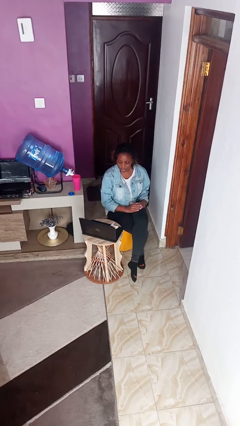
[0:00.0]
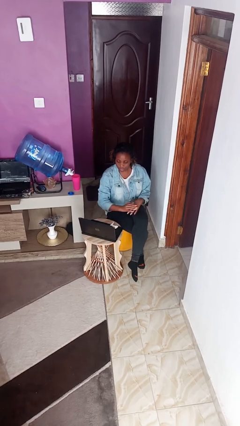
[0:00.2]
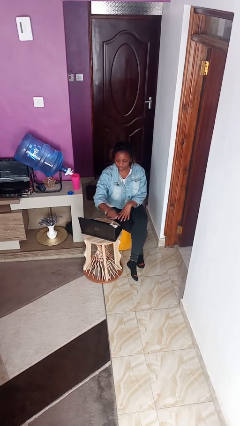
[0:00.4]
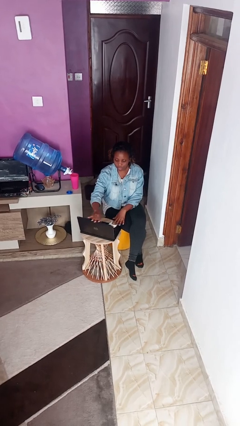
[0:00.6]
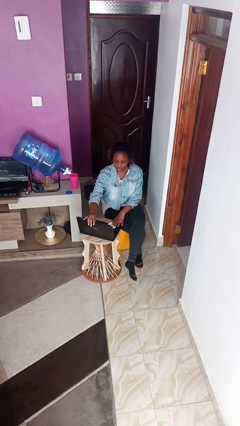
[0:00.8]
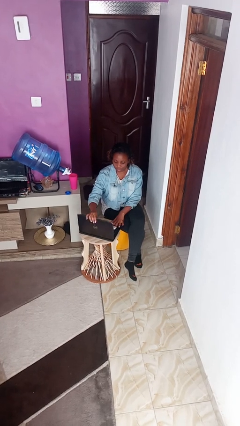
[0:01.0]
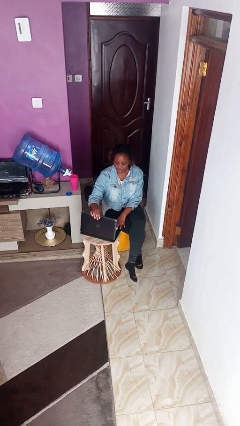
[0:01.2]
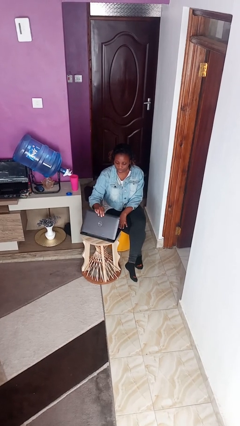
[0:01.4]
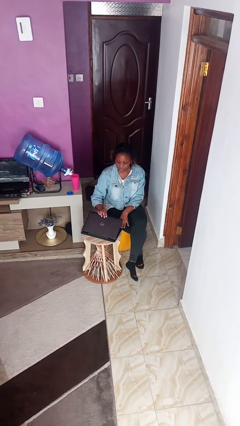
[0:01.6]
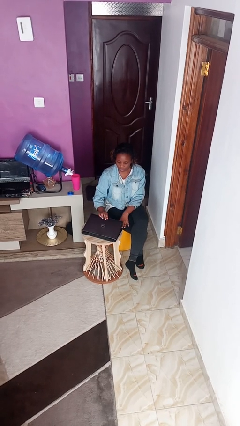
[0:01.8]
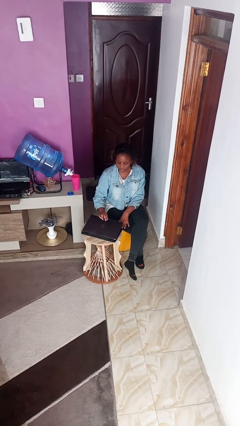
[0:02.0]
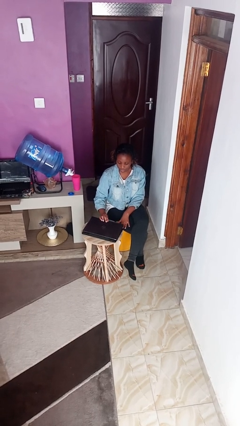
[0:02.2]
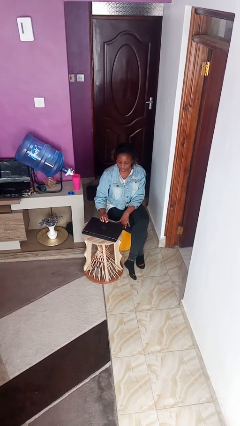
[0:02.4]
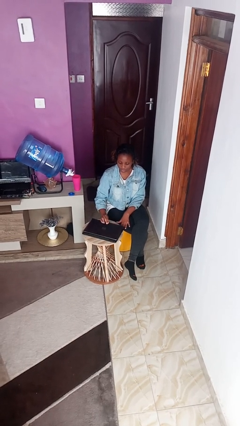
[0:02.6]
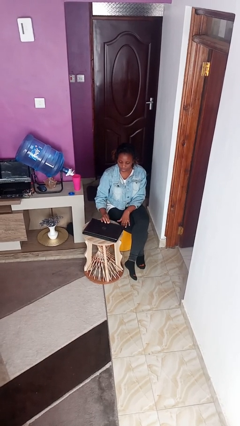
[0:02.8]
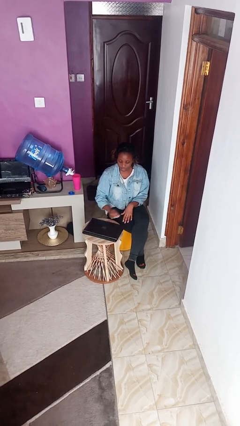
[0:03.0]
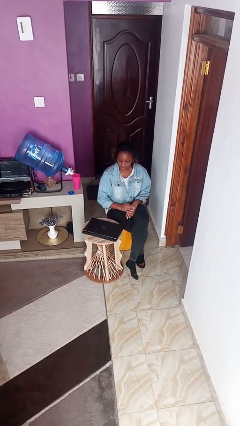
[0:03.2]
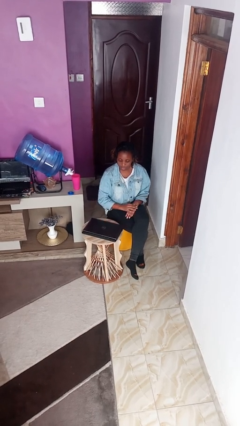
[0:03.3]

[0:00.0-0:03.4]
person closes laptop

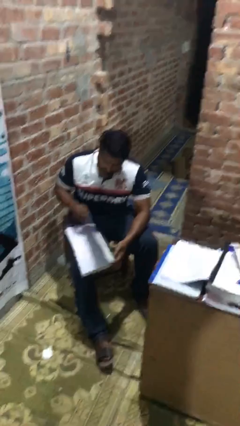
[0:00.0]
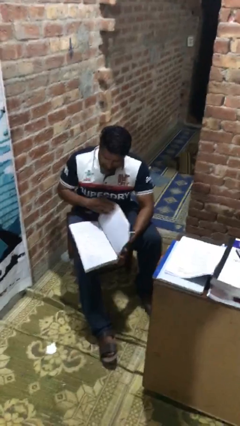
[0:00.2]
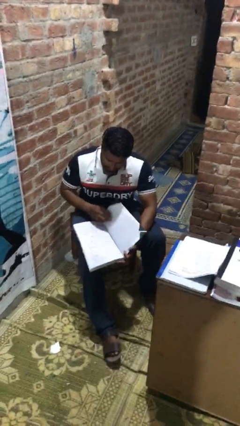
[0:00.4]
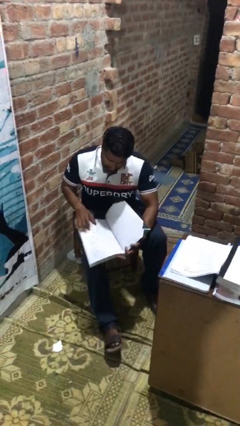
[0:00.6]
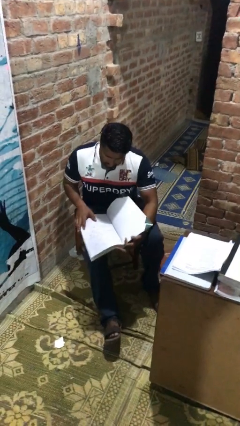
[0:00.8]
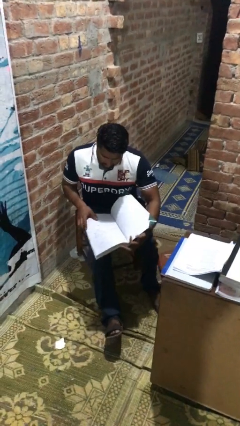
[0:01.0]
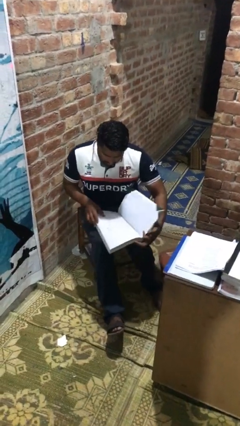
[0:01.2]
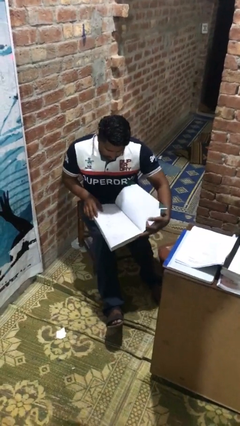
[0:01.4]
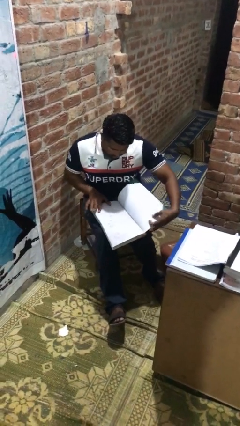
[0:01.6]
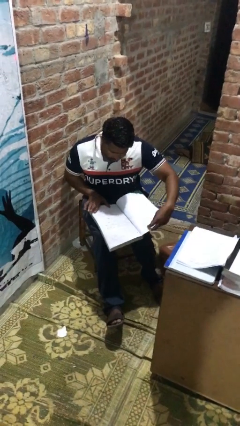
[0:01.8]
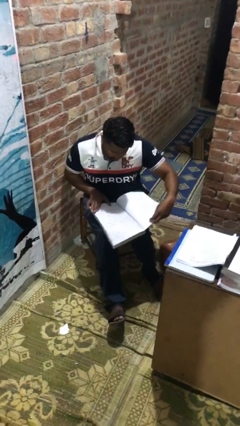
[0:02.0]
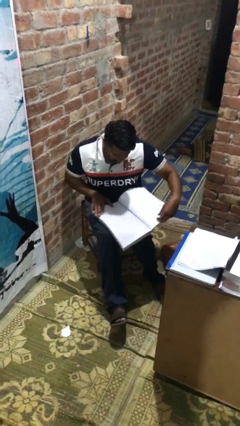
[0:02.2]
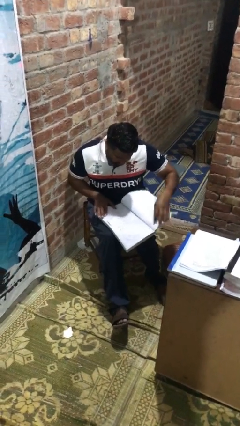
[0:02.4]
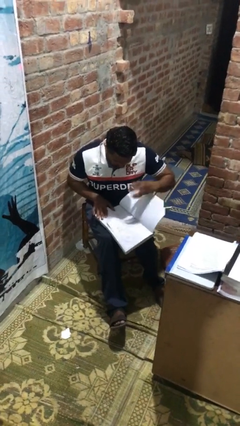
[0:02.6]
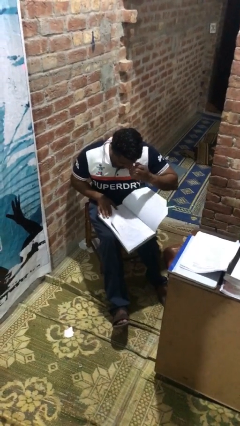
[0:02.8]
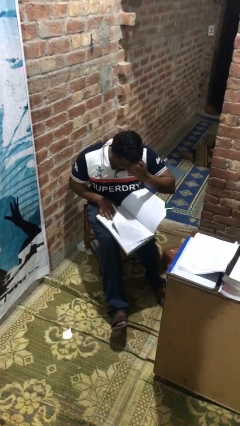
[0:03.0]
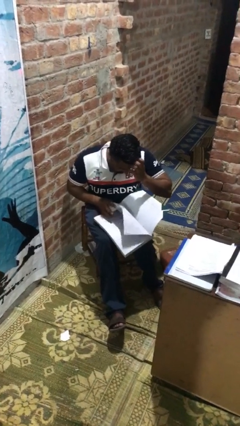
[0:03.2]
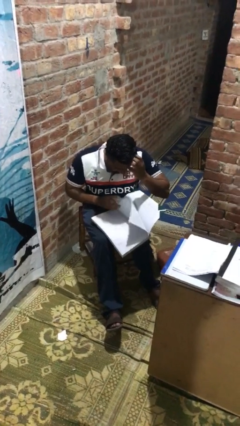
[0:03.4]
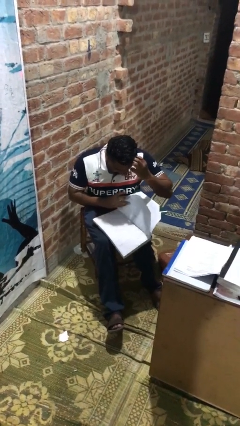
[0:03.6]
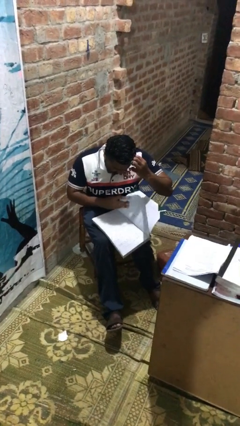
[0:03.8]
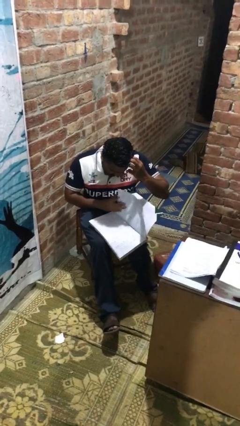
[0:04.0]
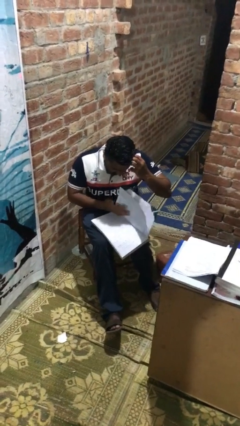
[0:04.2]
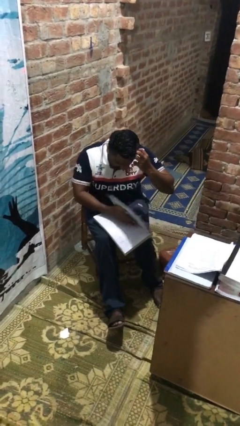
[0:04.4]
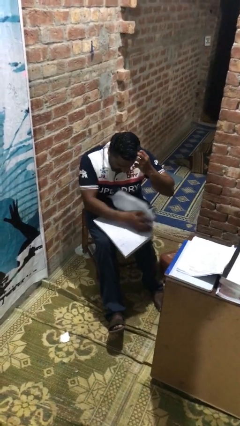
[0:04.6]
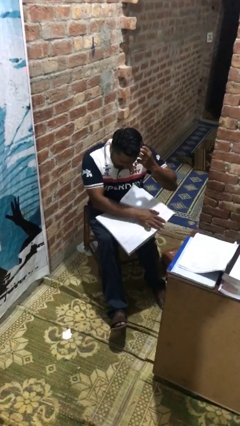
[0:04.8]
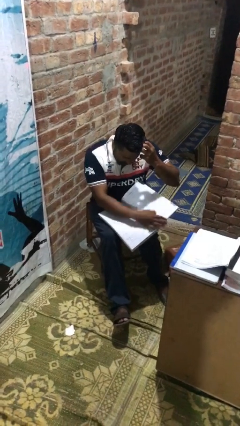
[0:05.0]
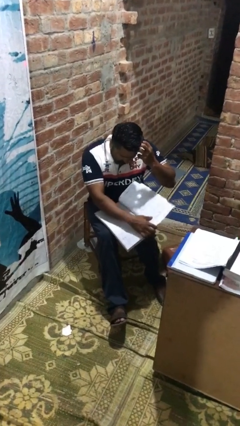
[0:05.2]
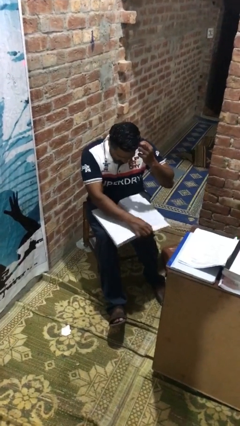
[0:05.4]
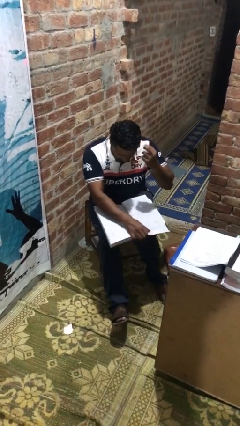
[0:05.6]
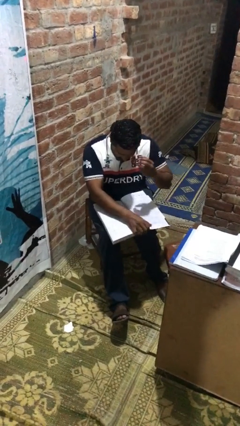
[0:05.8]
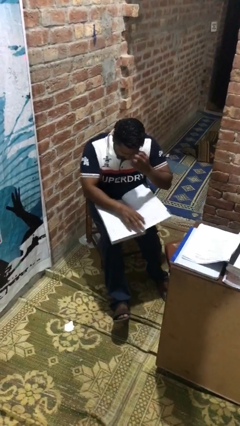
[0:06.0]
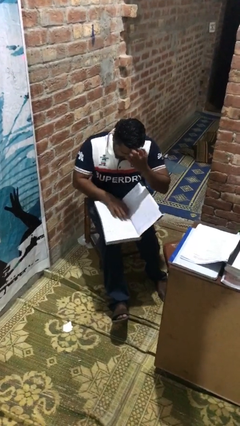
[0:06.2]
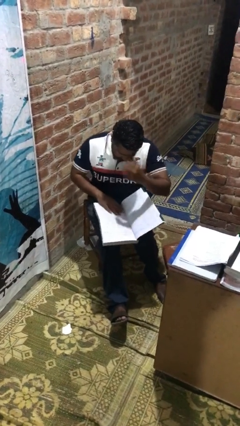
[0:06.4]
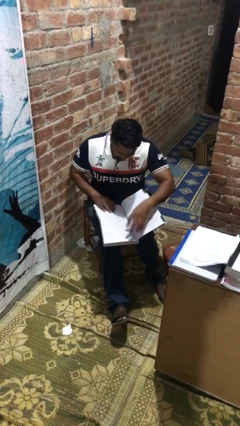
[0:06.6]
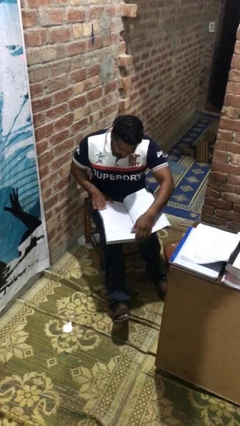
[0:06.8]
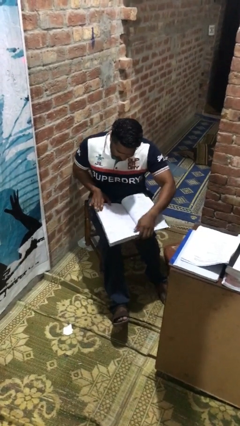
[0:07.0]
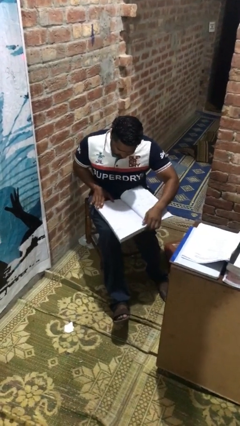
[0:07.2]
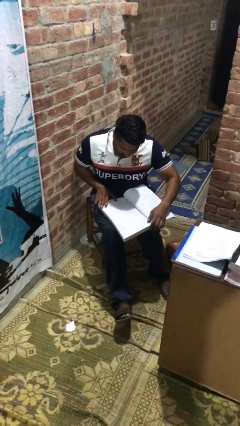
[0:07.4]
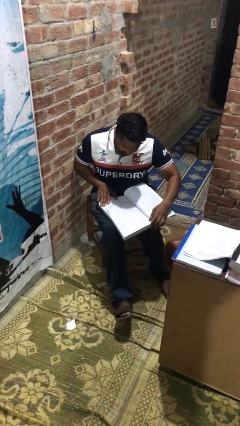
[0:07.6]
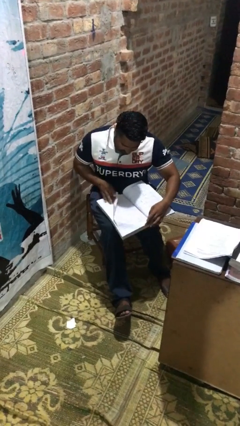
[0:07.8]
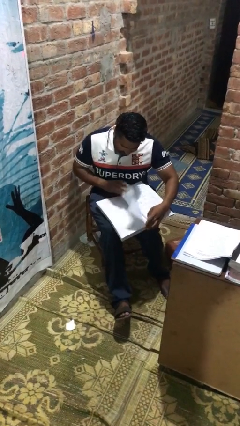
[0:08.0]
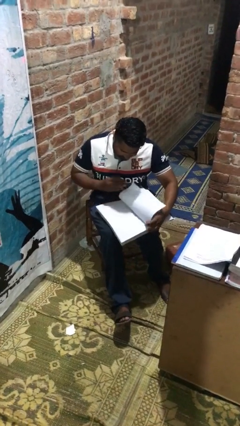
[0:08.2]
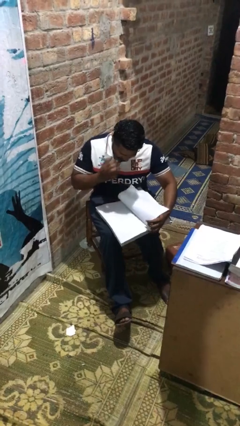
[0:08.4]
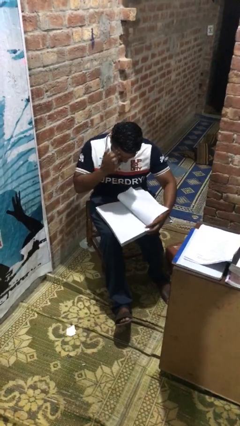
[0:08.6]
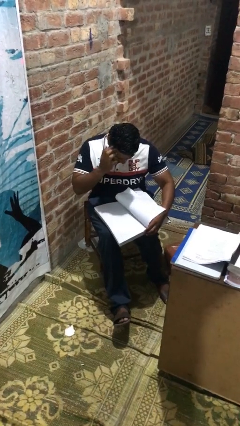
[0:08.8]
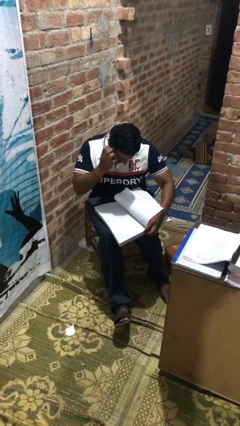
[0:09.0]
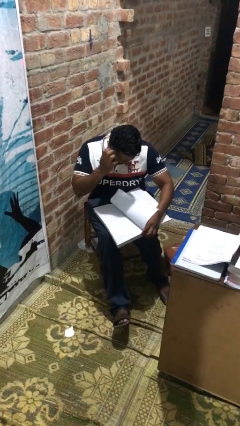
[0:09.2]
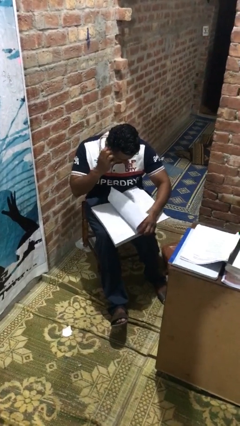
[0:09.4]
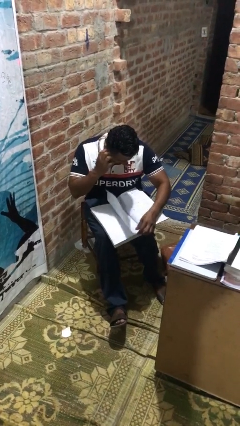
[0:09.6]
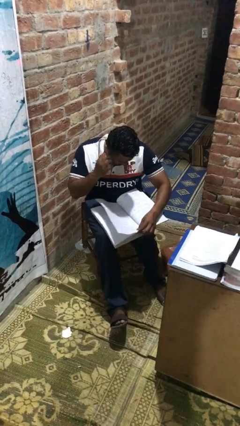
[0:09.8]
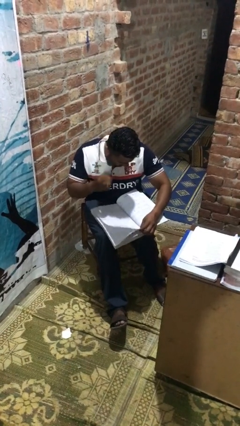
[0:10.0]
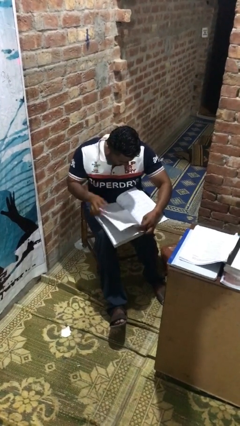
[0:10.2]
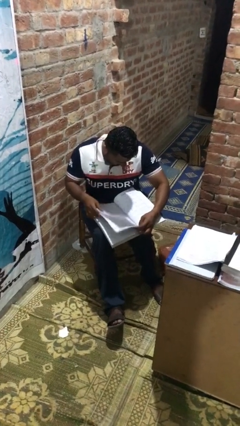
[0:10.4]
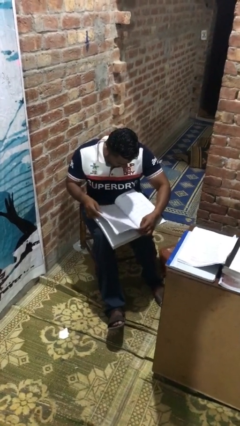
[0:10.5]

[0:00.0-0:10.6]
person reads document

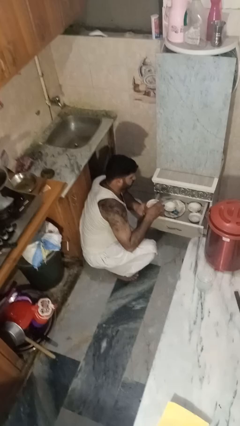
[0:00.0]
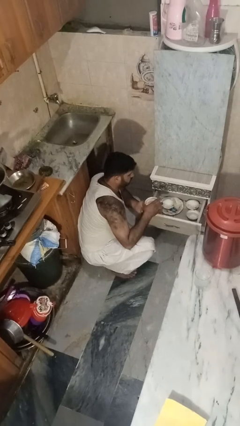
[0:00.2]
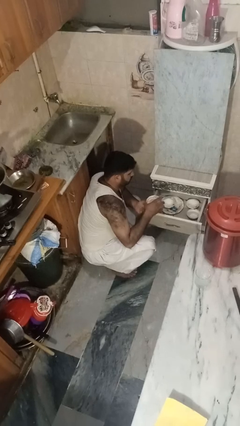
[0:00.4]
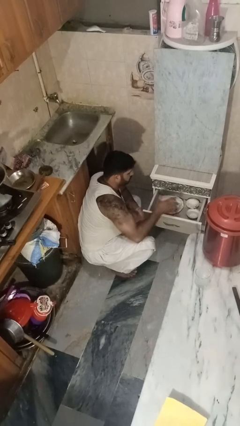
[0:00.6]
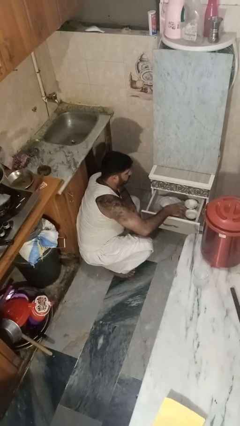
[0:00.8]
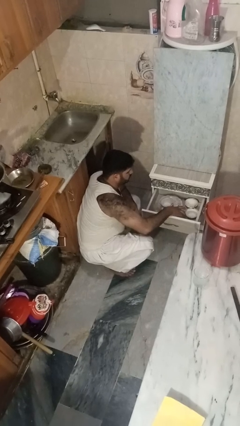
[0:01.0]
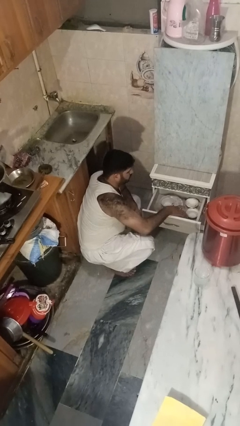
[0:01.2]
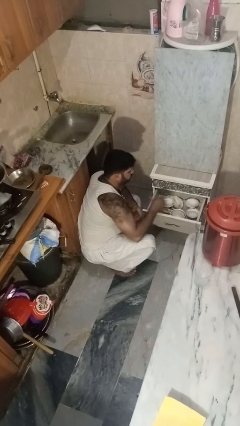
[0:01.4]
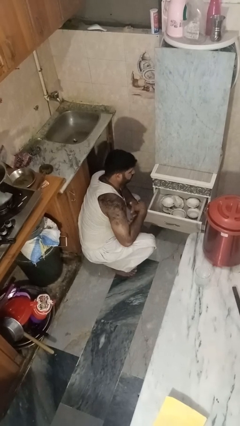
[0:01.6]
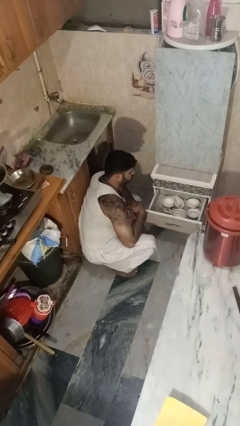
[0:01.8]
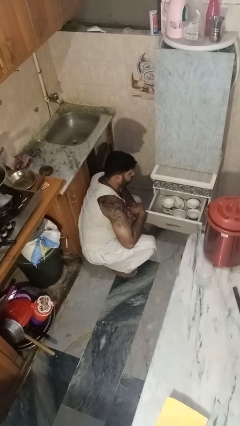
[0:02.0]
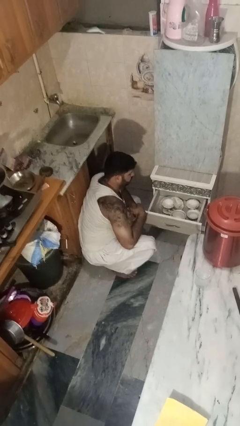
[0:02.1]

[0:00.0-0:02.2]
person puts object into kitchen drawer

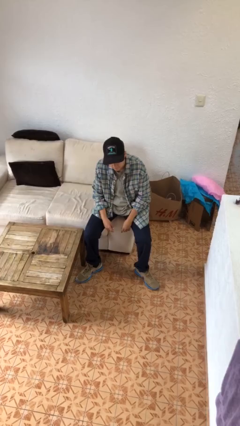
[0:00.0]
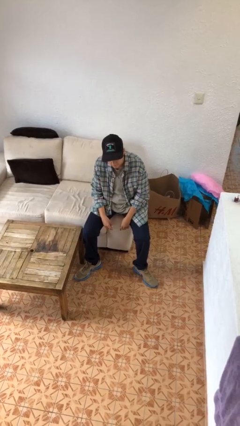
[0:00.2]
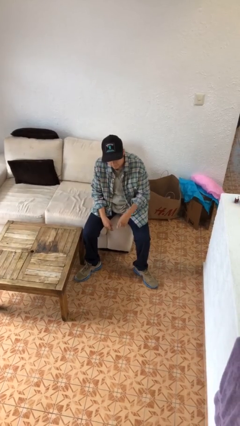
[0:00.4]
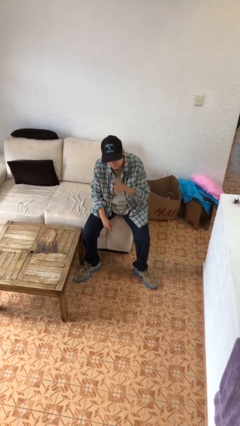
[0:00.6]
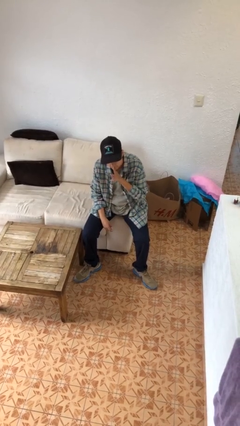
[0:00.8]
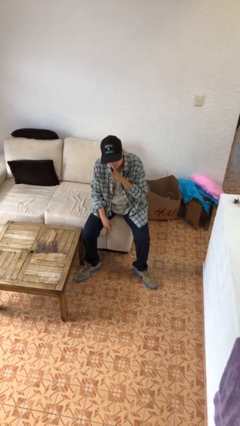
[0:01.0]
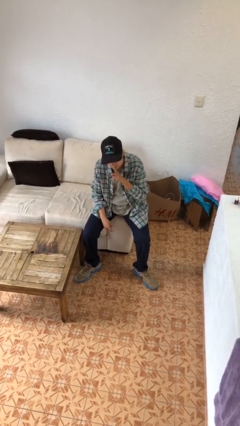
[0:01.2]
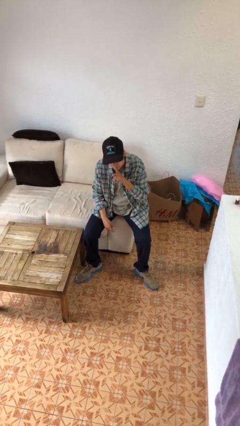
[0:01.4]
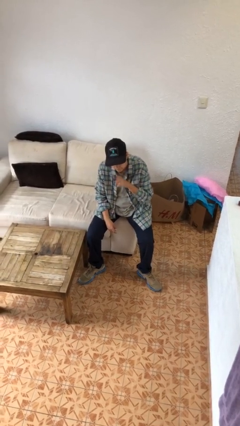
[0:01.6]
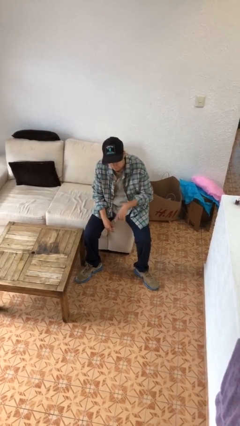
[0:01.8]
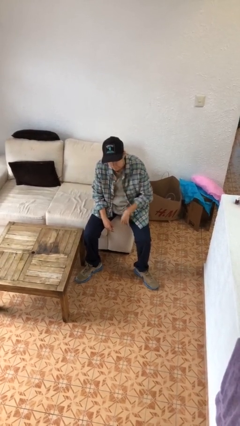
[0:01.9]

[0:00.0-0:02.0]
person gestures be quiet
